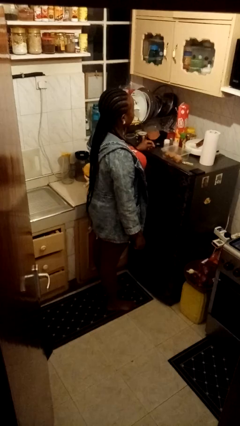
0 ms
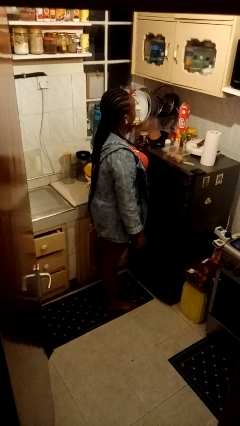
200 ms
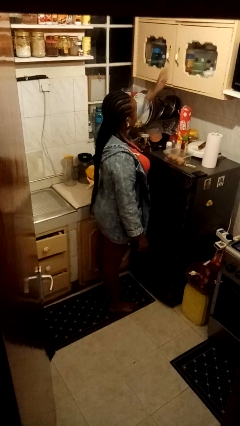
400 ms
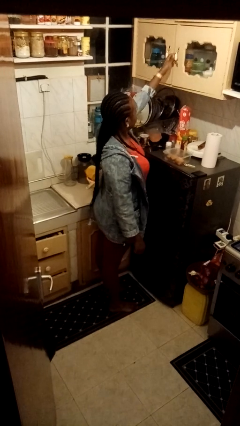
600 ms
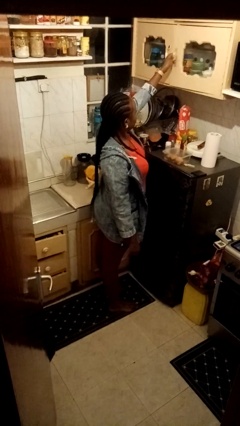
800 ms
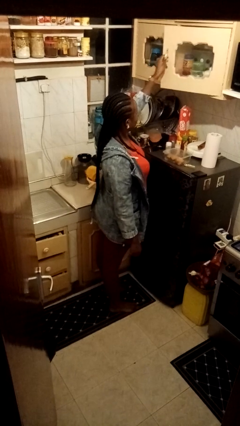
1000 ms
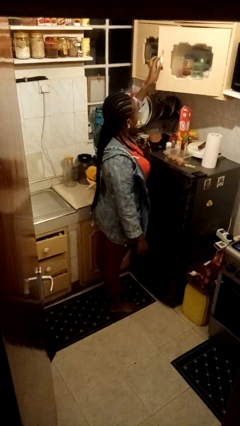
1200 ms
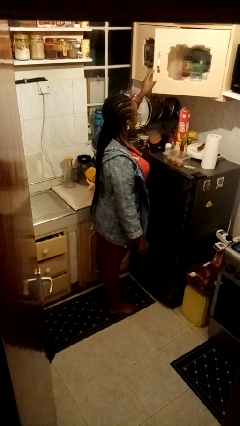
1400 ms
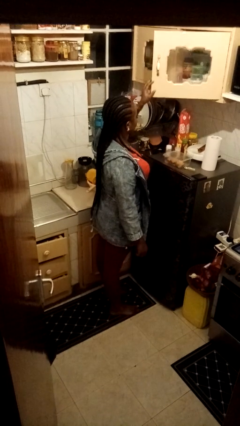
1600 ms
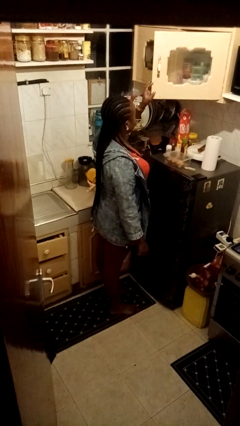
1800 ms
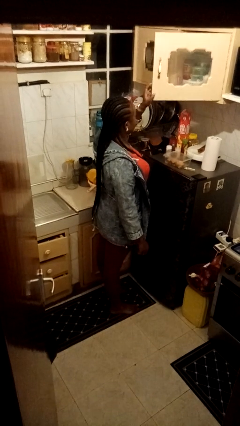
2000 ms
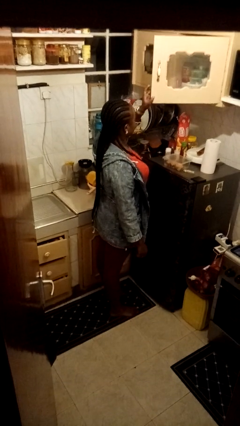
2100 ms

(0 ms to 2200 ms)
person opens cabinet

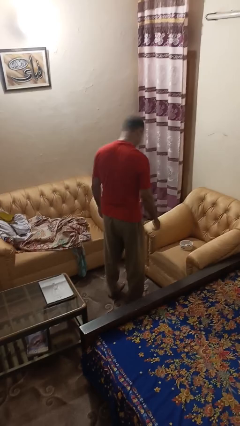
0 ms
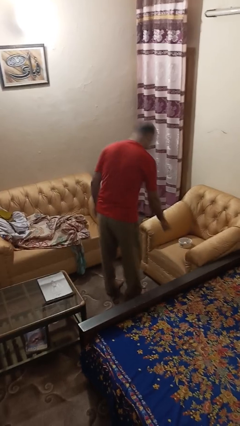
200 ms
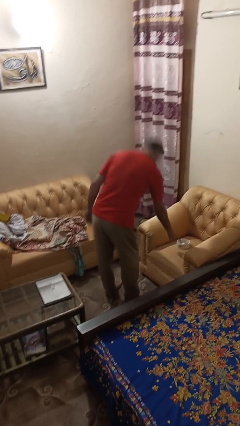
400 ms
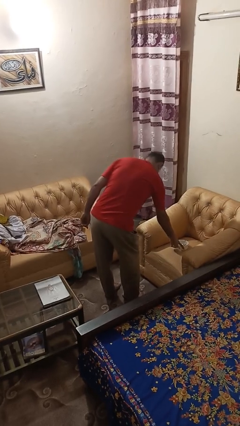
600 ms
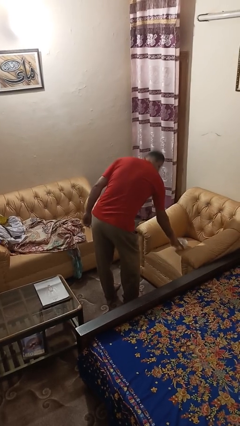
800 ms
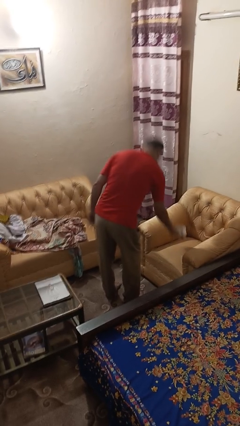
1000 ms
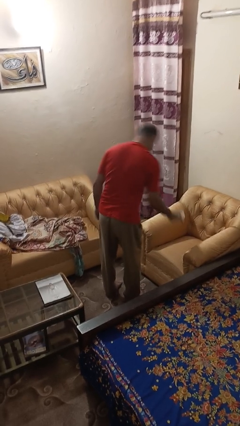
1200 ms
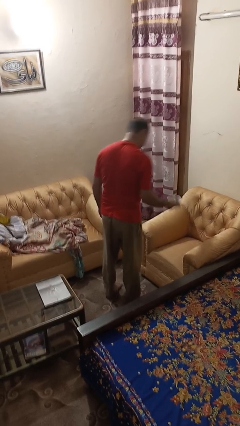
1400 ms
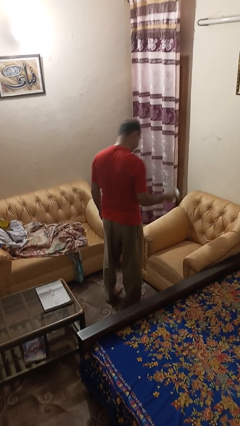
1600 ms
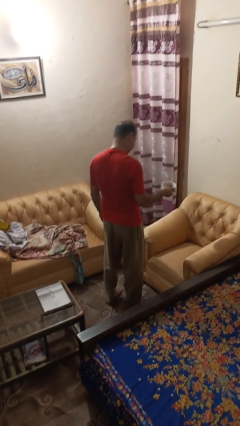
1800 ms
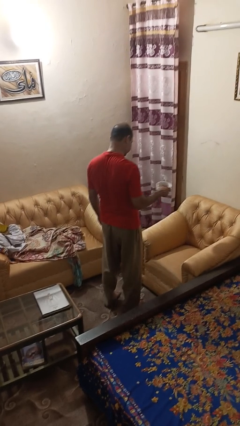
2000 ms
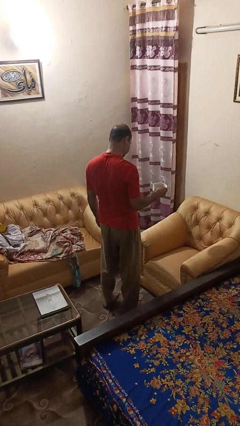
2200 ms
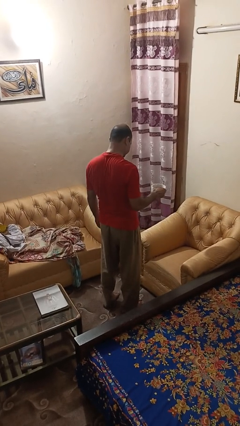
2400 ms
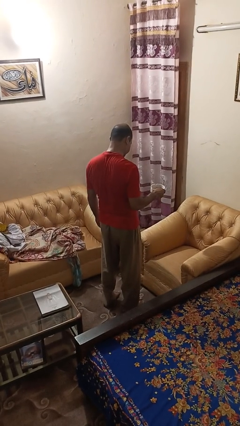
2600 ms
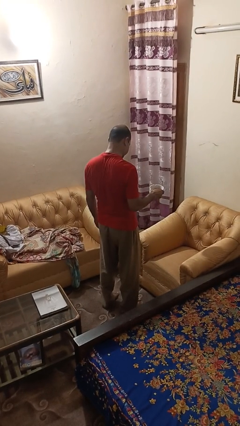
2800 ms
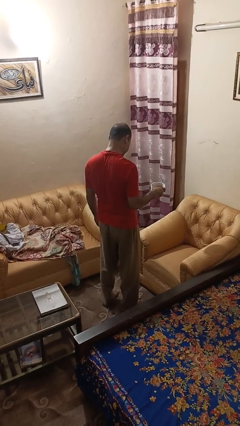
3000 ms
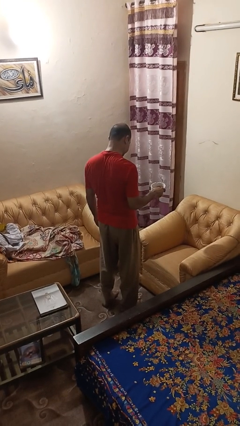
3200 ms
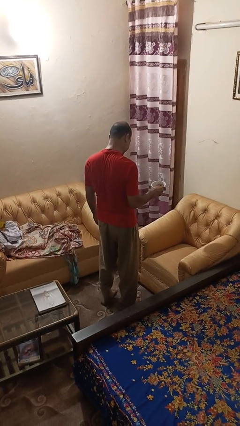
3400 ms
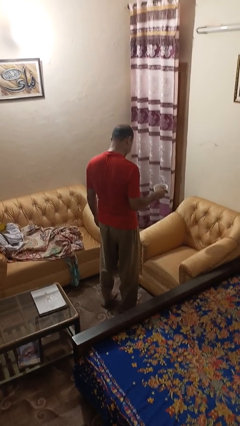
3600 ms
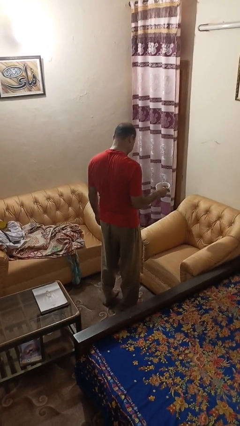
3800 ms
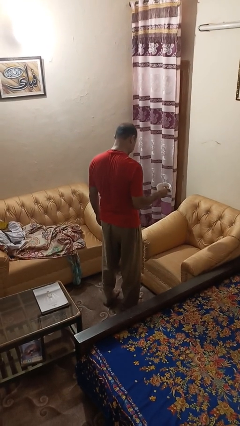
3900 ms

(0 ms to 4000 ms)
person picks up object from couch

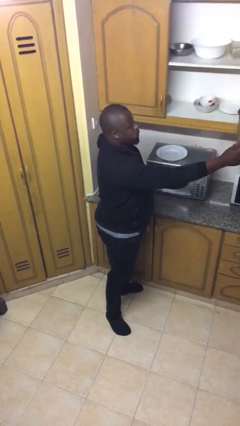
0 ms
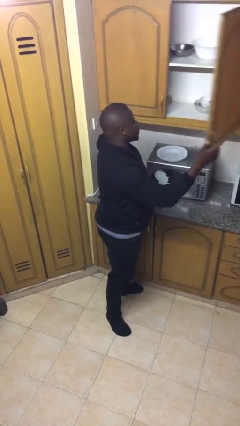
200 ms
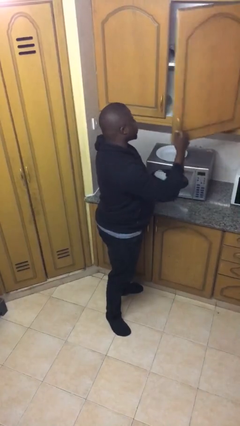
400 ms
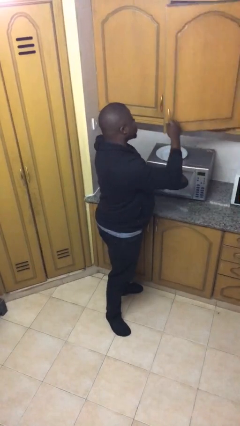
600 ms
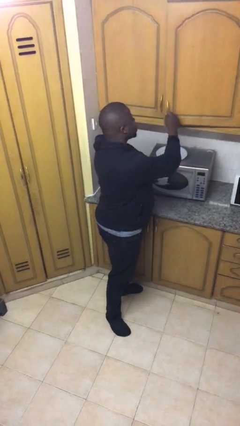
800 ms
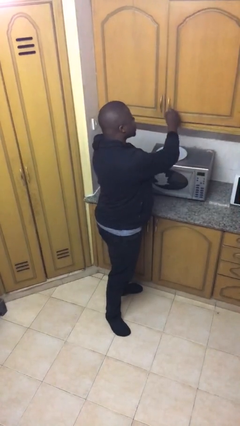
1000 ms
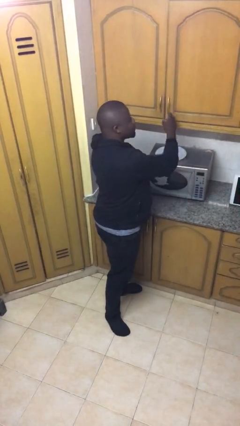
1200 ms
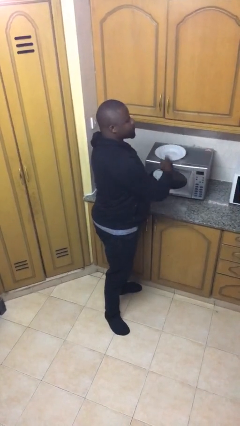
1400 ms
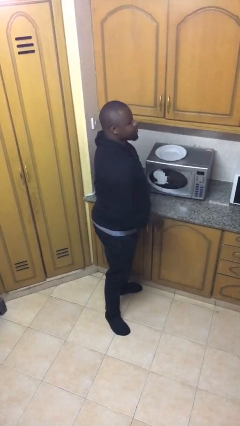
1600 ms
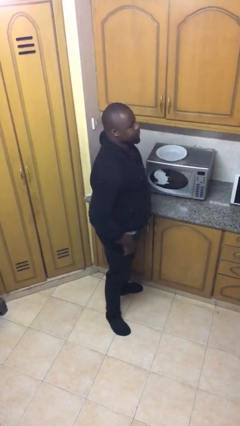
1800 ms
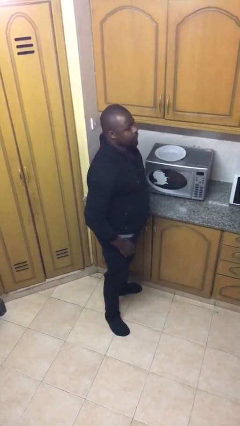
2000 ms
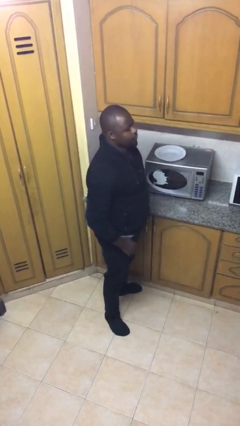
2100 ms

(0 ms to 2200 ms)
person closes cabinet

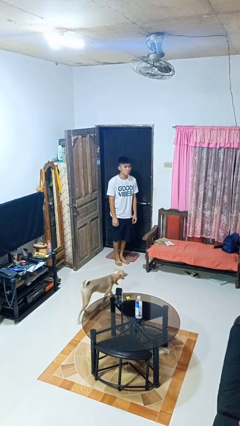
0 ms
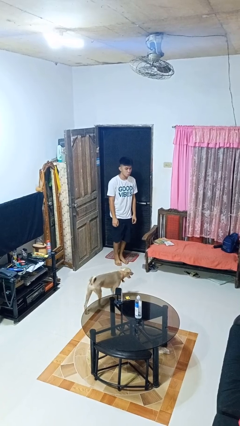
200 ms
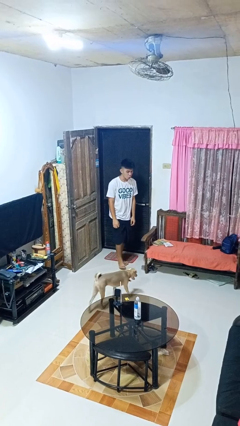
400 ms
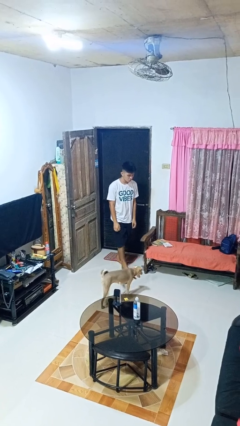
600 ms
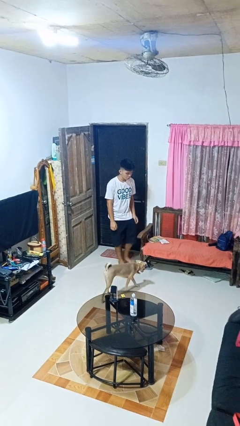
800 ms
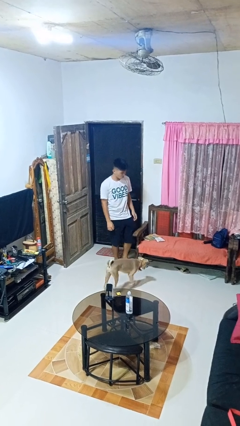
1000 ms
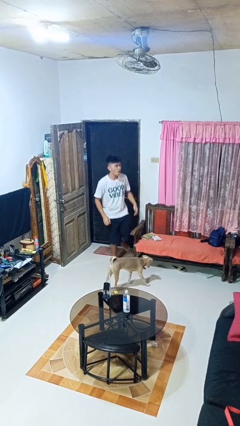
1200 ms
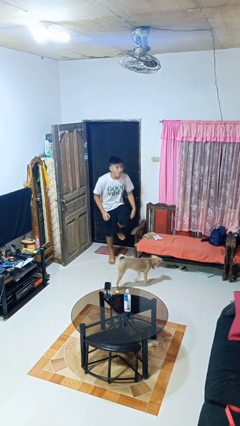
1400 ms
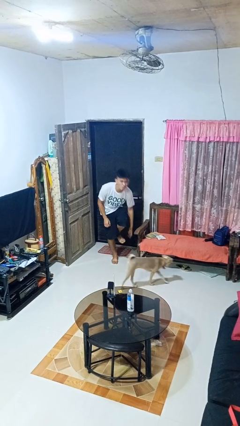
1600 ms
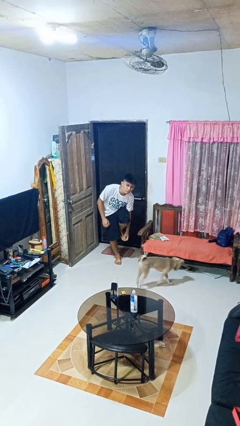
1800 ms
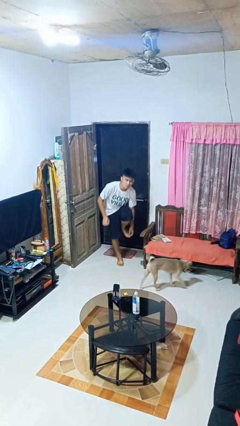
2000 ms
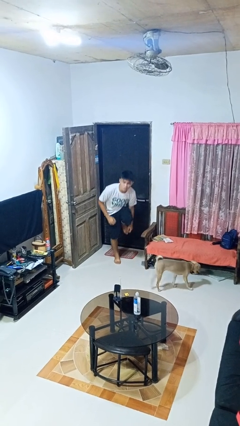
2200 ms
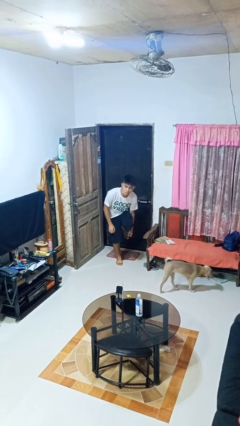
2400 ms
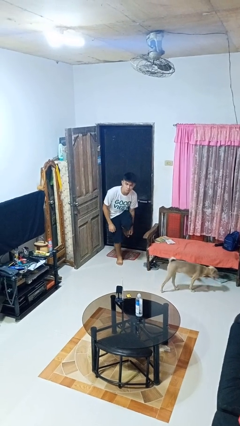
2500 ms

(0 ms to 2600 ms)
person stubs toe

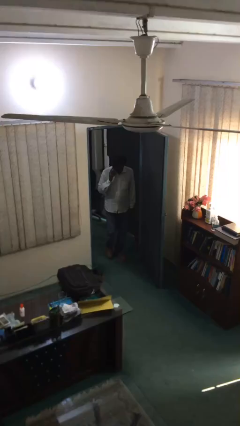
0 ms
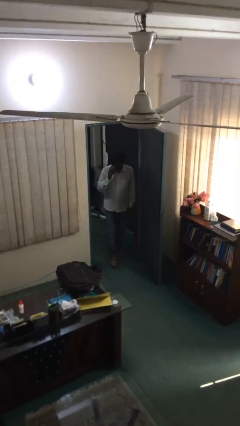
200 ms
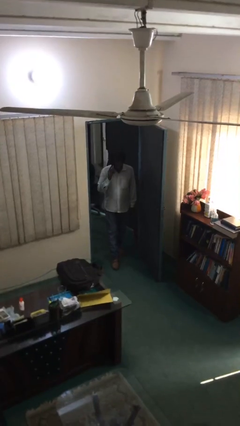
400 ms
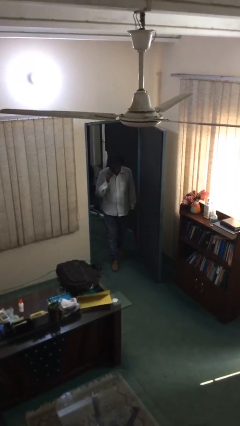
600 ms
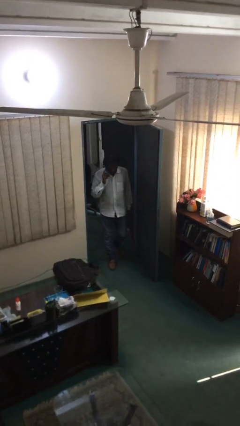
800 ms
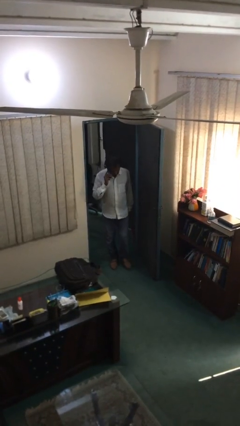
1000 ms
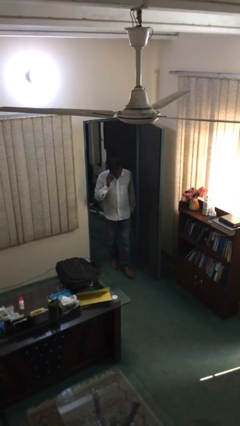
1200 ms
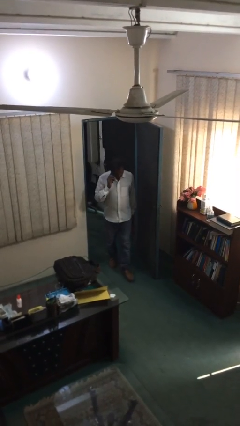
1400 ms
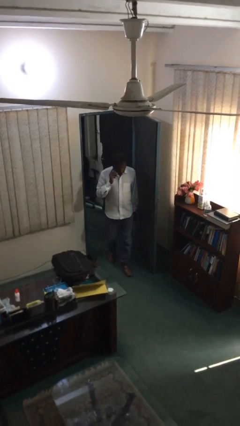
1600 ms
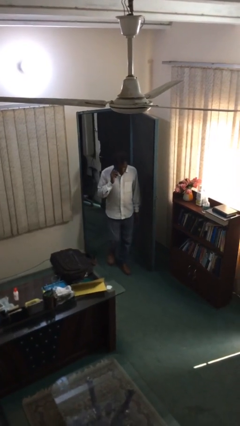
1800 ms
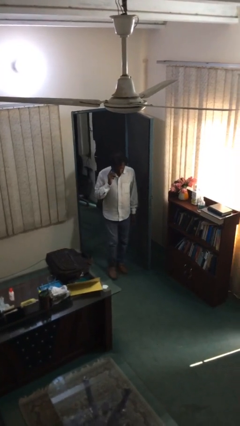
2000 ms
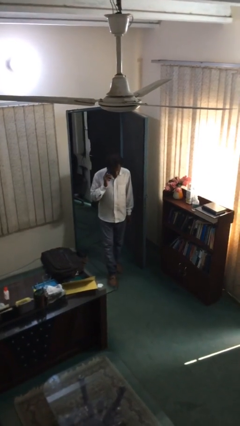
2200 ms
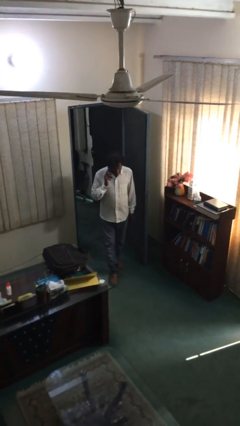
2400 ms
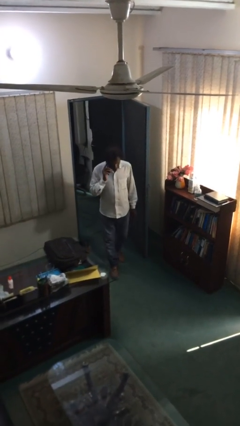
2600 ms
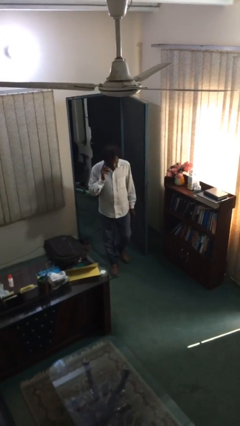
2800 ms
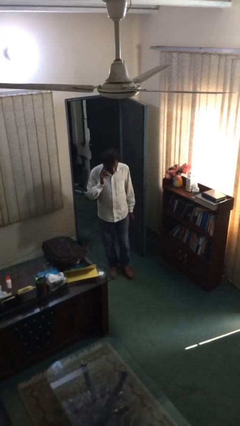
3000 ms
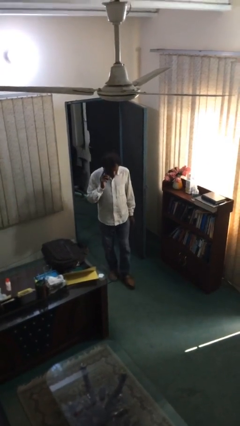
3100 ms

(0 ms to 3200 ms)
person enters scene through structure

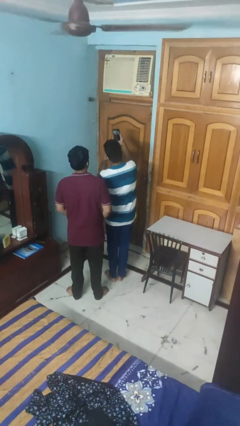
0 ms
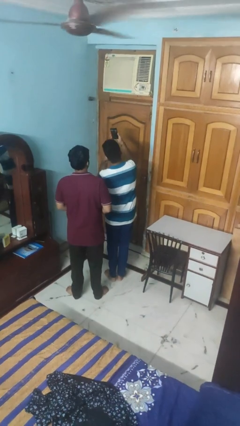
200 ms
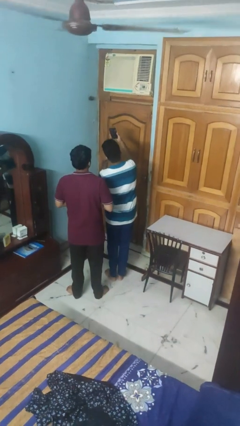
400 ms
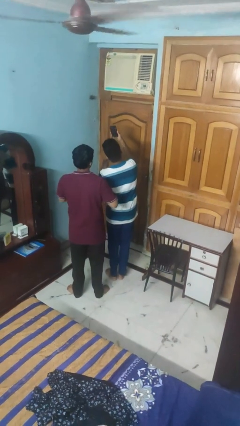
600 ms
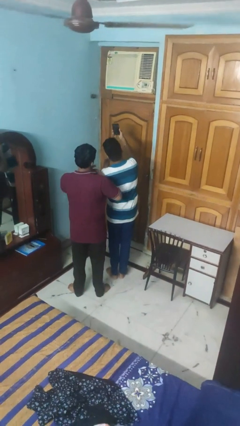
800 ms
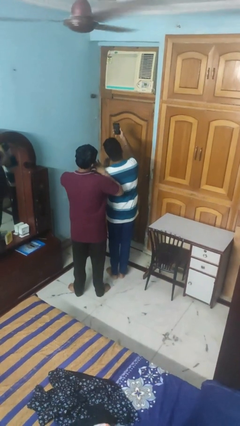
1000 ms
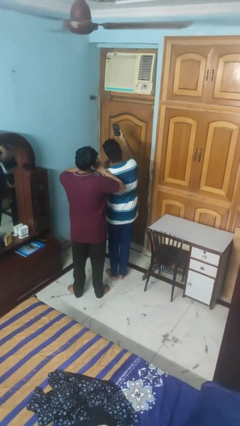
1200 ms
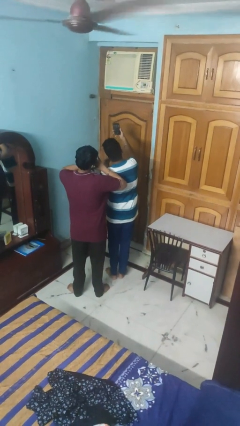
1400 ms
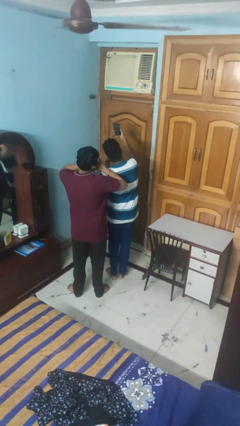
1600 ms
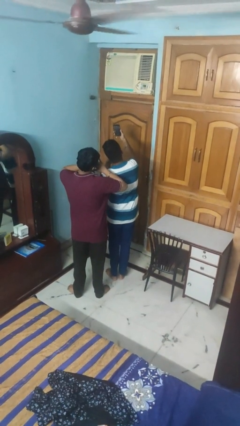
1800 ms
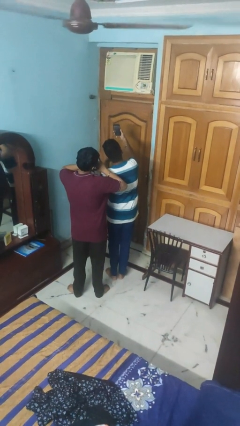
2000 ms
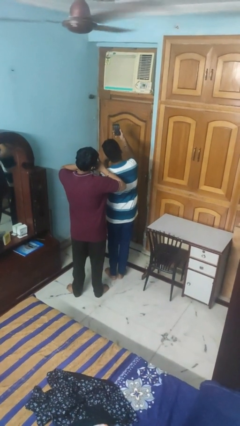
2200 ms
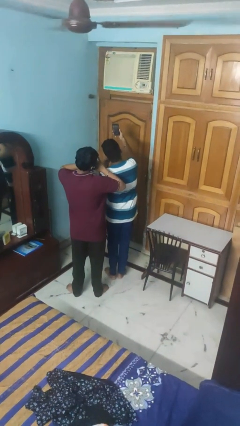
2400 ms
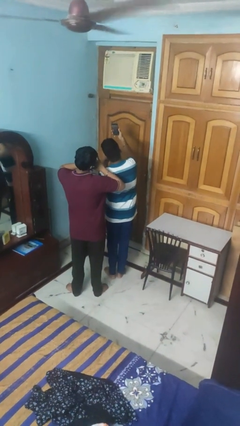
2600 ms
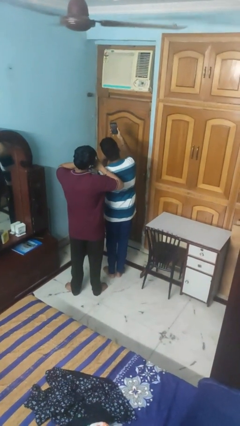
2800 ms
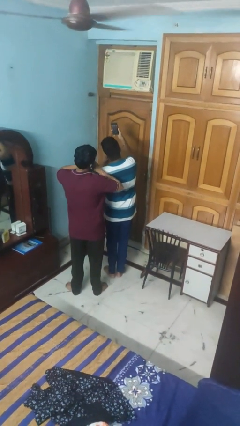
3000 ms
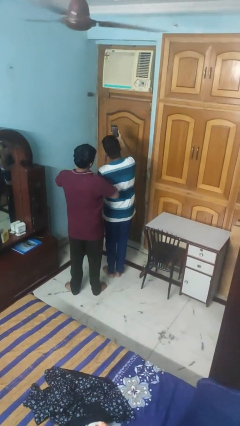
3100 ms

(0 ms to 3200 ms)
person takes selfie with person

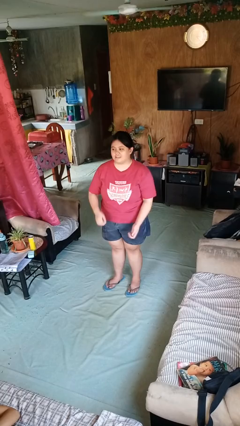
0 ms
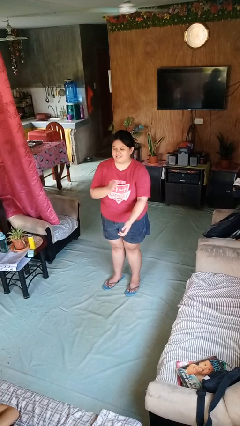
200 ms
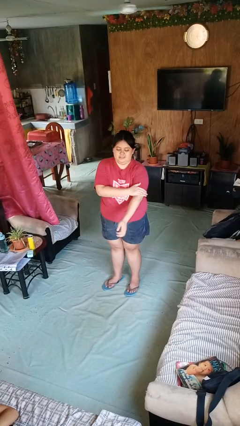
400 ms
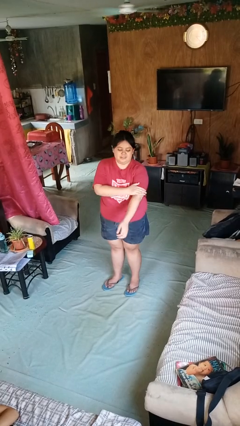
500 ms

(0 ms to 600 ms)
person swats bug
